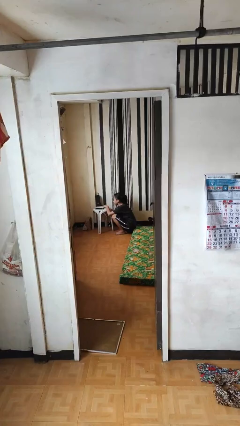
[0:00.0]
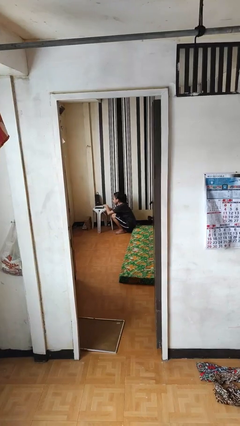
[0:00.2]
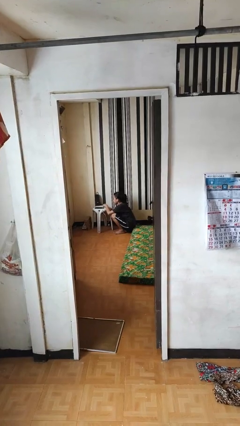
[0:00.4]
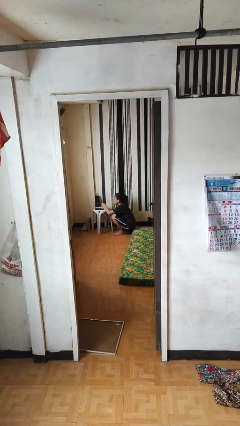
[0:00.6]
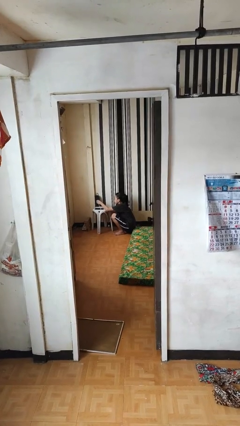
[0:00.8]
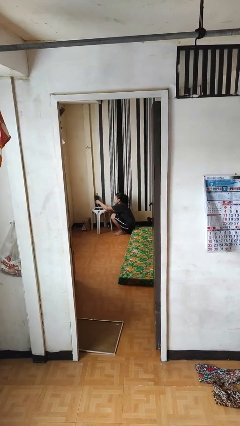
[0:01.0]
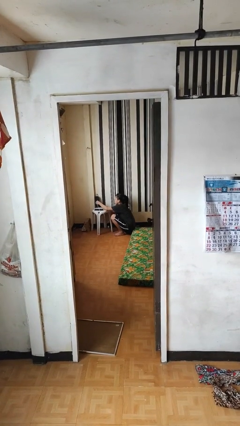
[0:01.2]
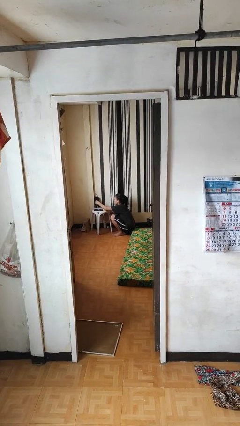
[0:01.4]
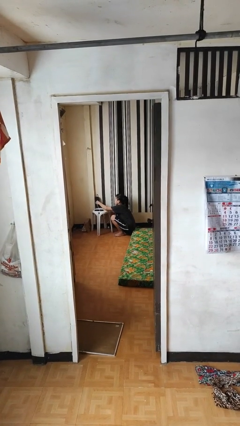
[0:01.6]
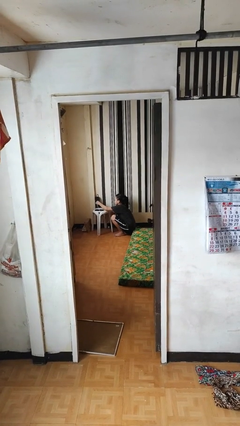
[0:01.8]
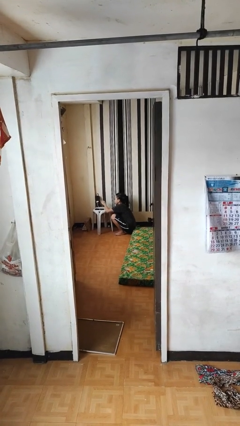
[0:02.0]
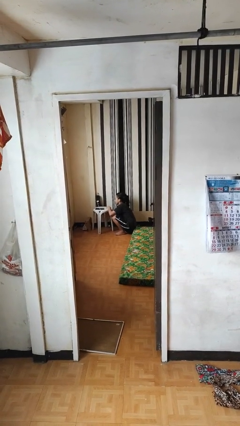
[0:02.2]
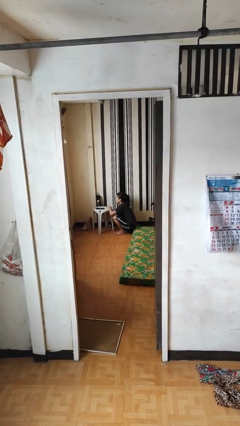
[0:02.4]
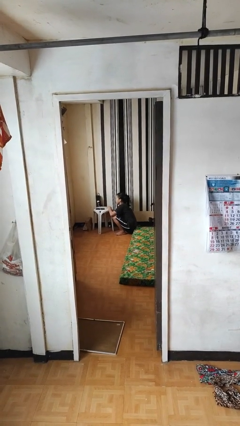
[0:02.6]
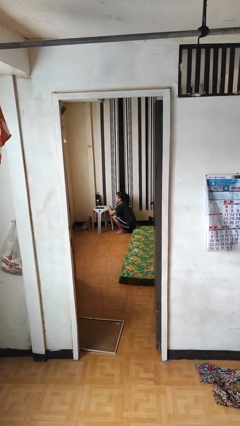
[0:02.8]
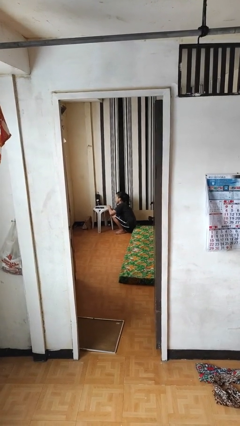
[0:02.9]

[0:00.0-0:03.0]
person plugs into electrical socket

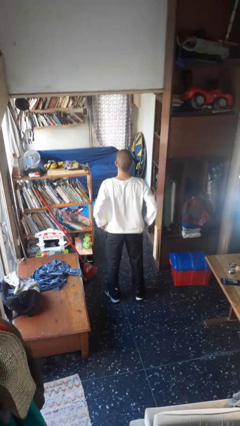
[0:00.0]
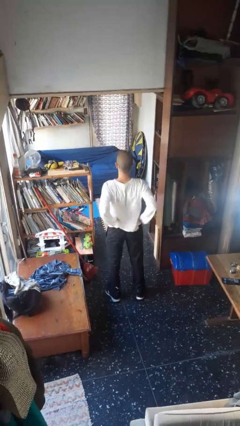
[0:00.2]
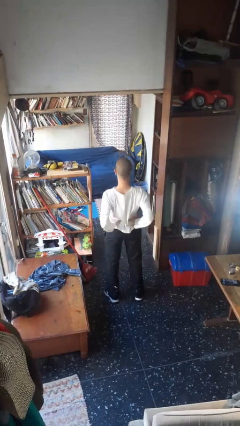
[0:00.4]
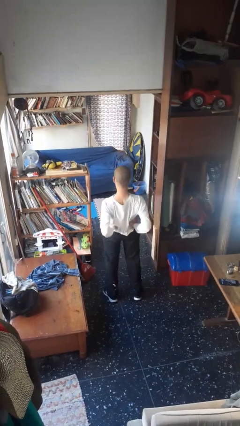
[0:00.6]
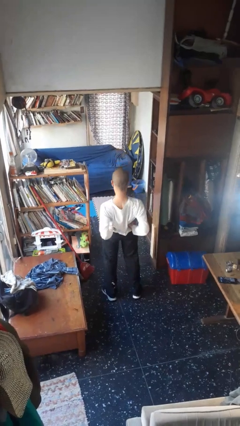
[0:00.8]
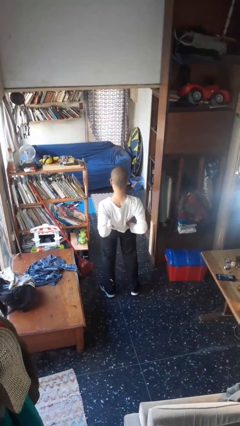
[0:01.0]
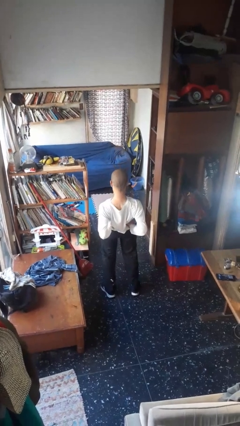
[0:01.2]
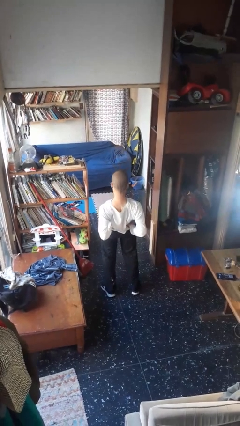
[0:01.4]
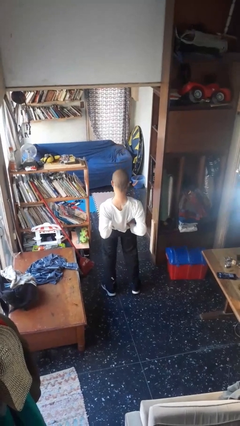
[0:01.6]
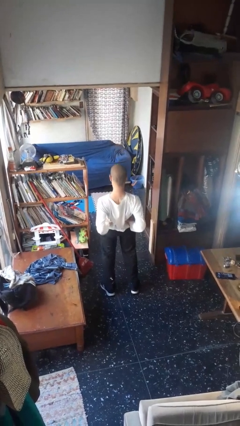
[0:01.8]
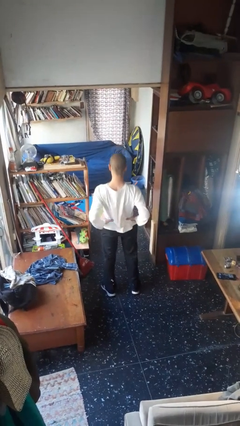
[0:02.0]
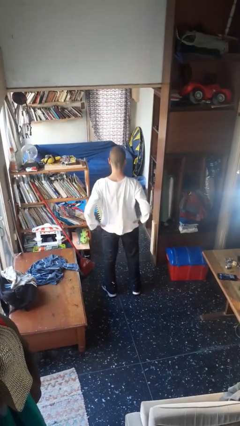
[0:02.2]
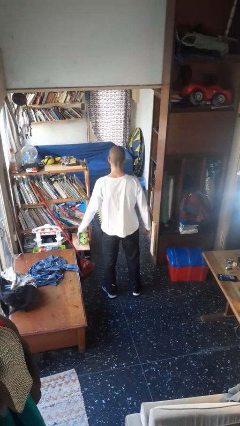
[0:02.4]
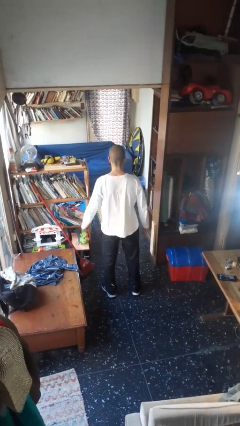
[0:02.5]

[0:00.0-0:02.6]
person stretches back

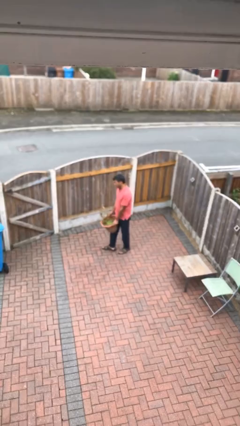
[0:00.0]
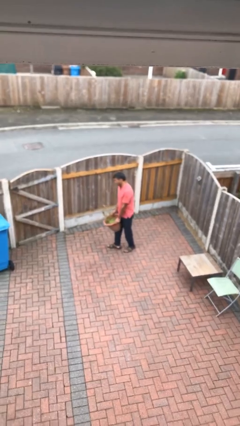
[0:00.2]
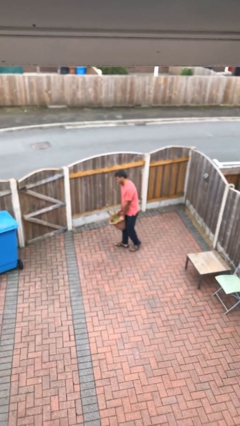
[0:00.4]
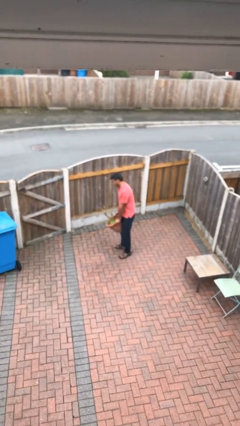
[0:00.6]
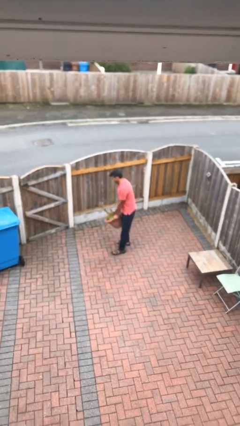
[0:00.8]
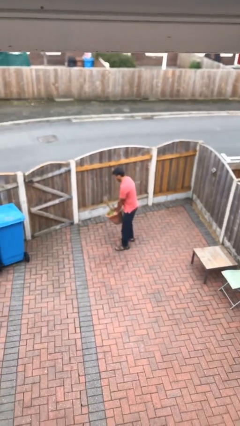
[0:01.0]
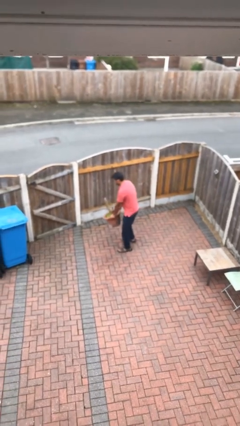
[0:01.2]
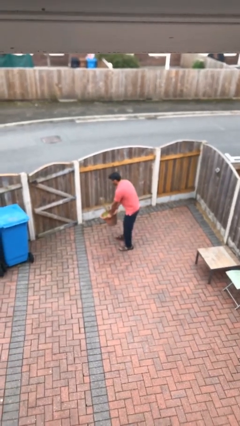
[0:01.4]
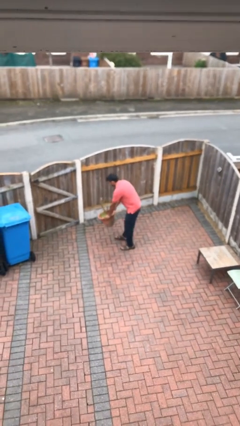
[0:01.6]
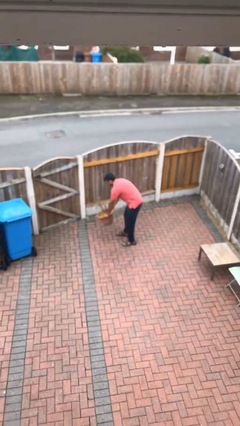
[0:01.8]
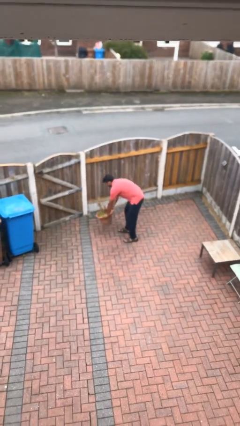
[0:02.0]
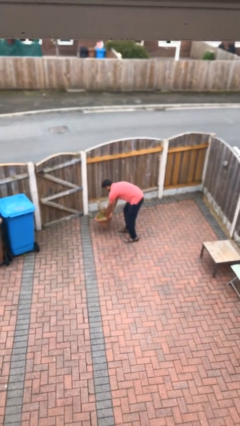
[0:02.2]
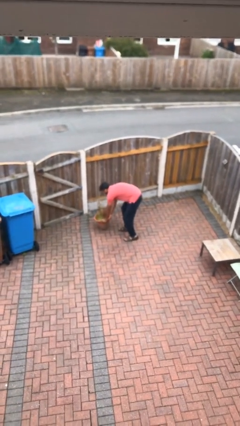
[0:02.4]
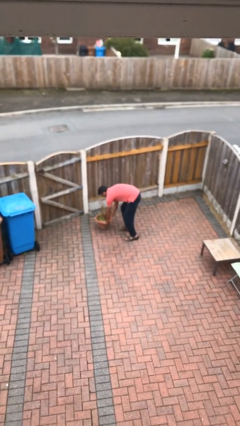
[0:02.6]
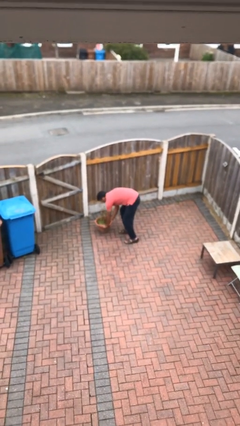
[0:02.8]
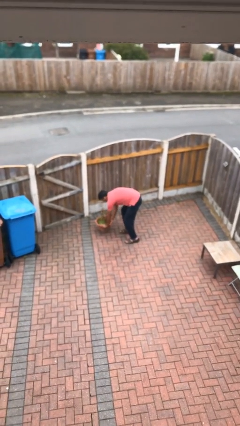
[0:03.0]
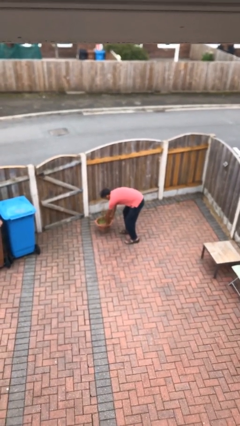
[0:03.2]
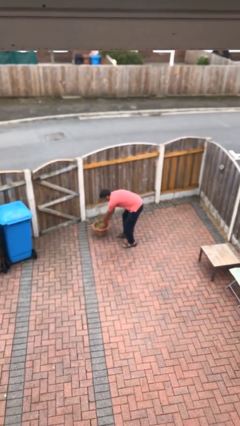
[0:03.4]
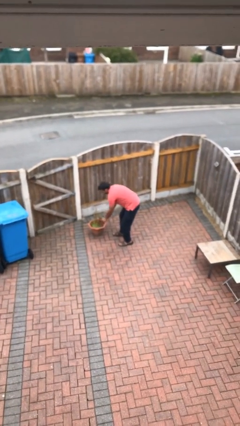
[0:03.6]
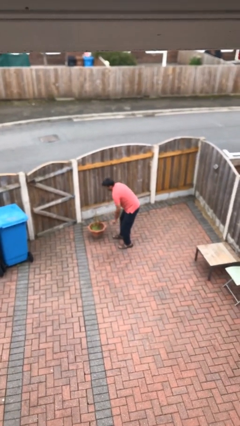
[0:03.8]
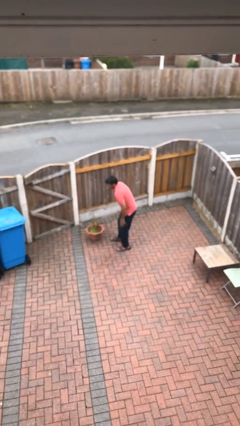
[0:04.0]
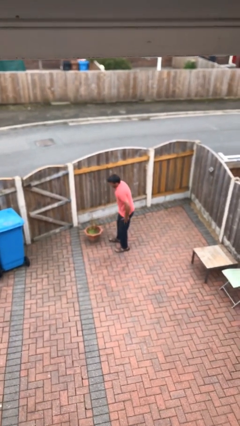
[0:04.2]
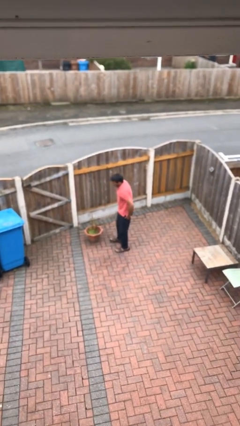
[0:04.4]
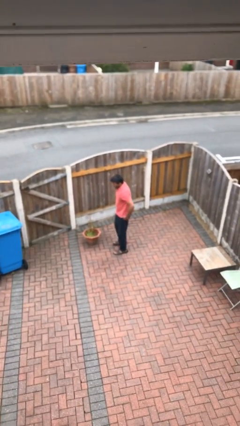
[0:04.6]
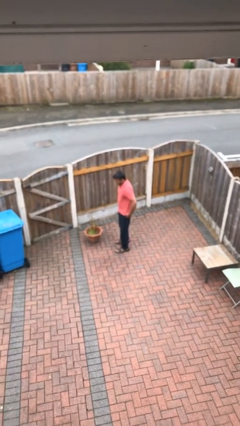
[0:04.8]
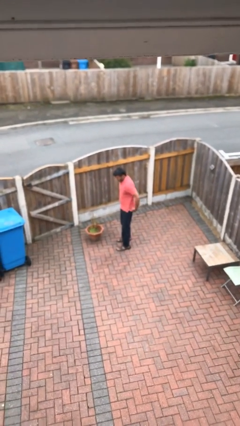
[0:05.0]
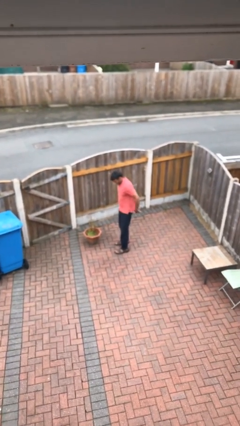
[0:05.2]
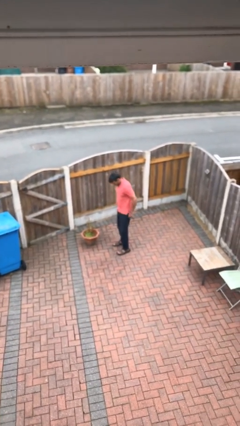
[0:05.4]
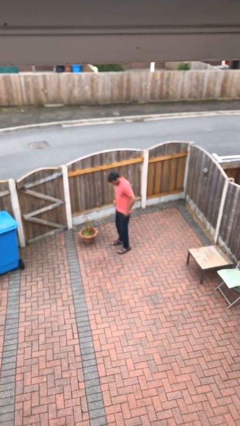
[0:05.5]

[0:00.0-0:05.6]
person puts down object on floor

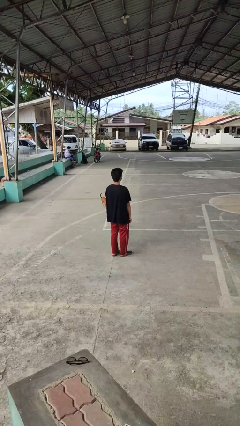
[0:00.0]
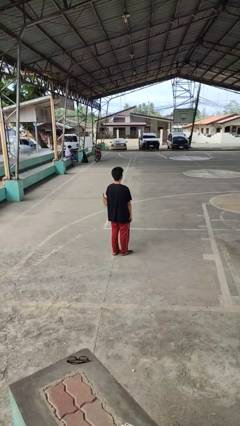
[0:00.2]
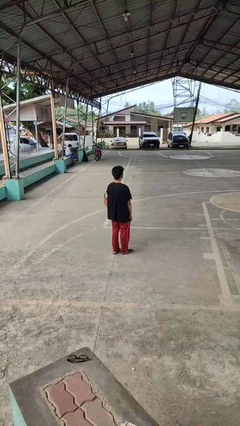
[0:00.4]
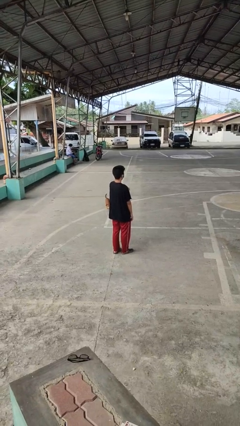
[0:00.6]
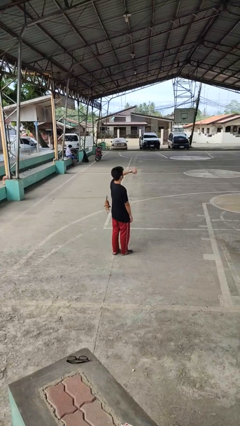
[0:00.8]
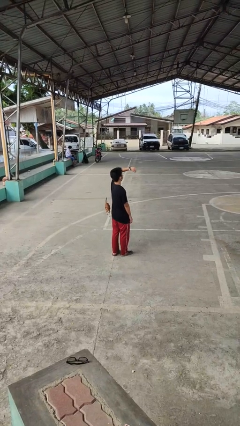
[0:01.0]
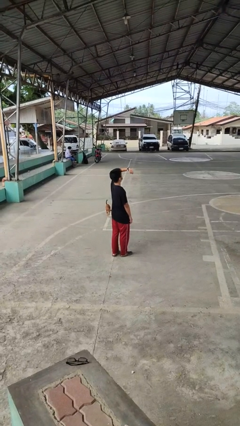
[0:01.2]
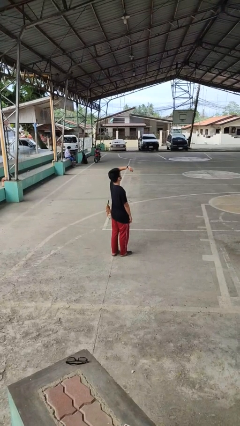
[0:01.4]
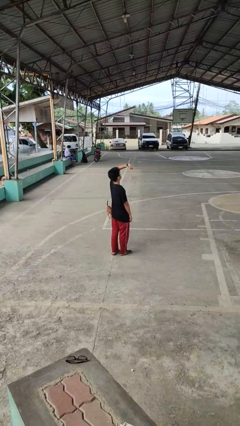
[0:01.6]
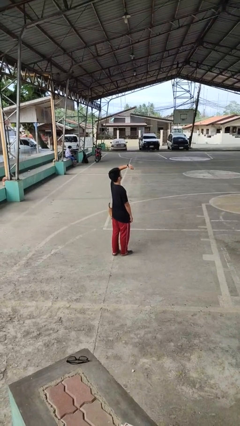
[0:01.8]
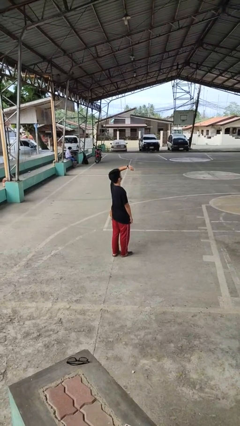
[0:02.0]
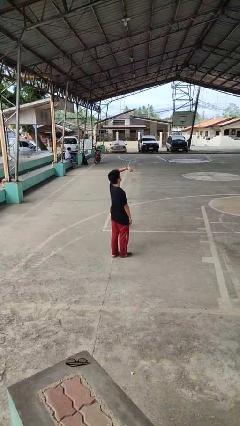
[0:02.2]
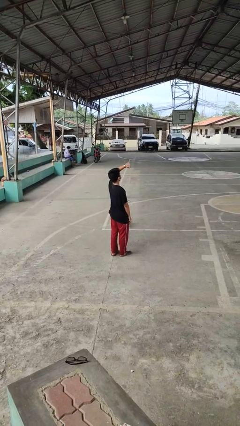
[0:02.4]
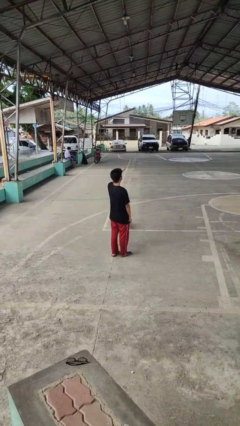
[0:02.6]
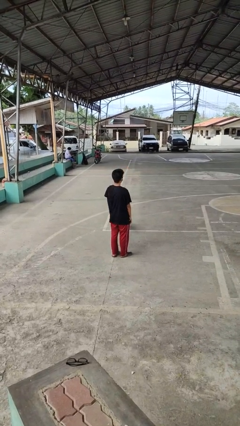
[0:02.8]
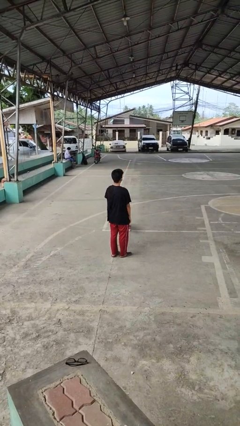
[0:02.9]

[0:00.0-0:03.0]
person looks at wristwatch

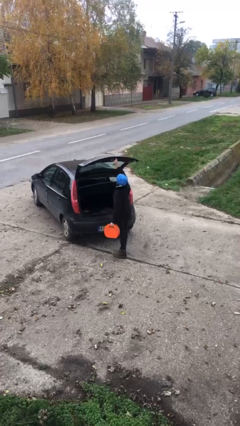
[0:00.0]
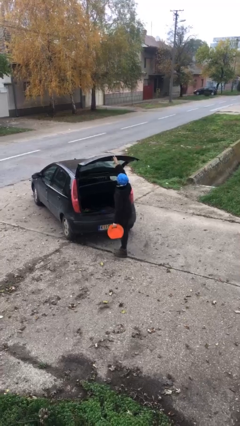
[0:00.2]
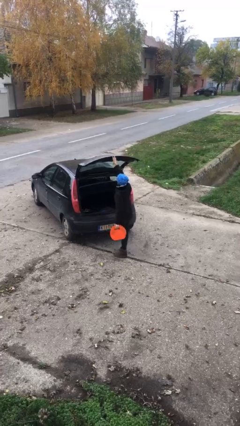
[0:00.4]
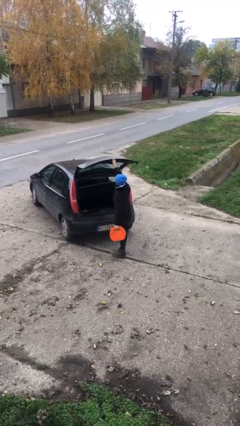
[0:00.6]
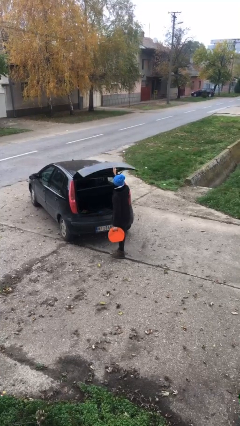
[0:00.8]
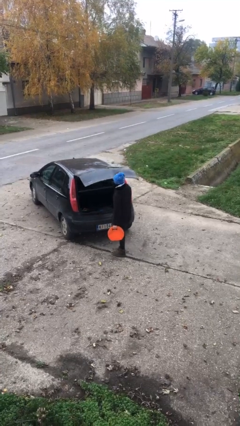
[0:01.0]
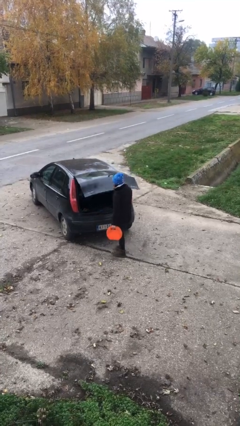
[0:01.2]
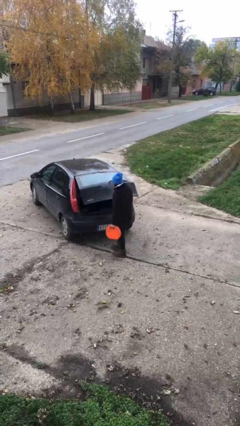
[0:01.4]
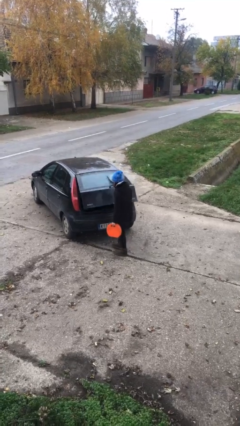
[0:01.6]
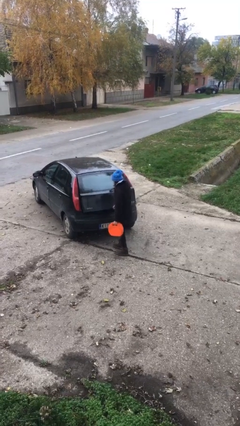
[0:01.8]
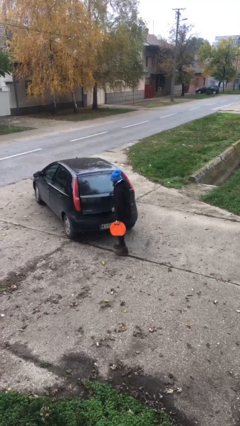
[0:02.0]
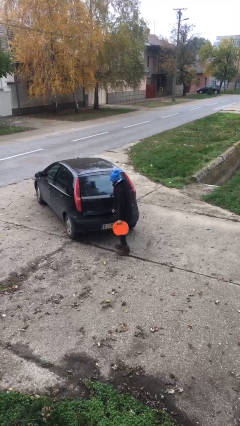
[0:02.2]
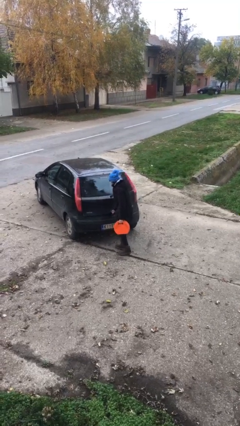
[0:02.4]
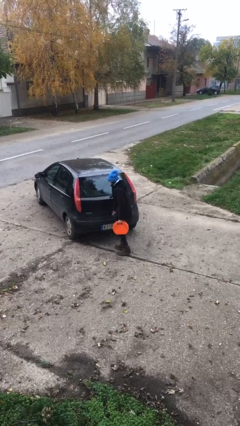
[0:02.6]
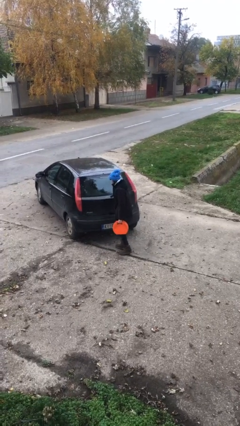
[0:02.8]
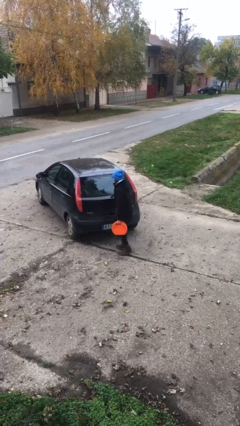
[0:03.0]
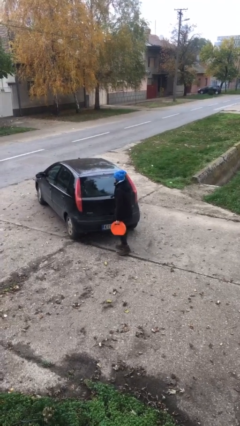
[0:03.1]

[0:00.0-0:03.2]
person closes car trunk

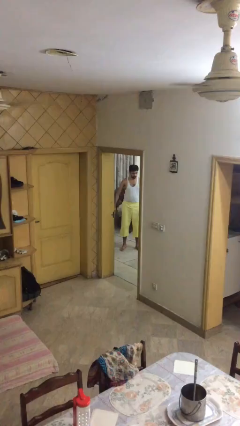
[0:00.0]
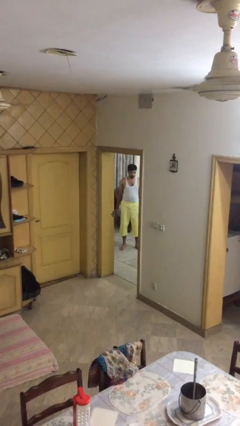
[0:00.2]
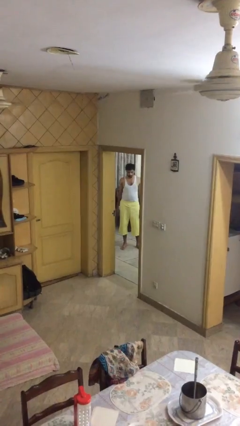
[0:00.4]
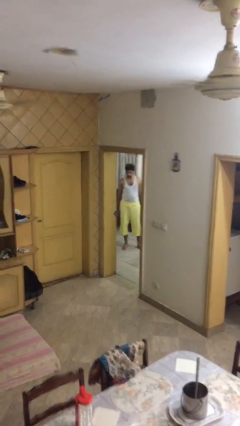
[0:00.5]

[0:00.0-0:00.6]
person enters scene through structure
